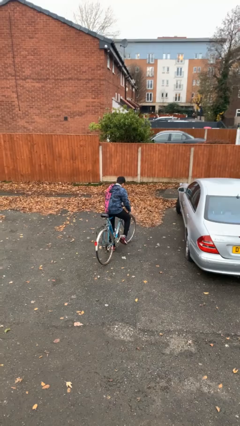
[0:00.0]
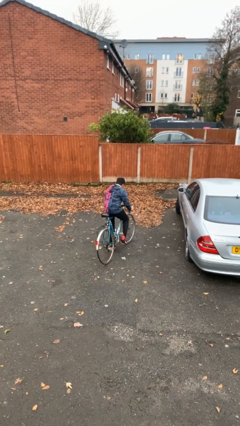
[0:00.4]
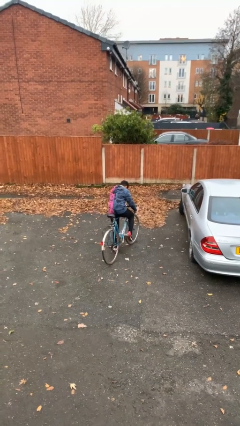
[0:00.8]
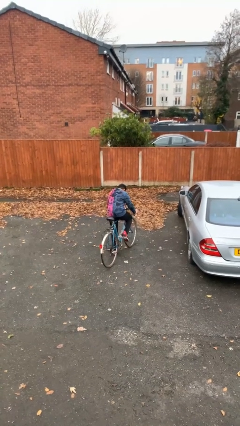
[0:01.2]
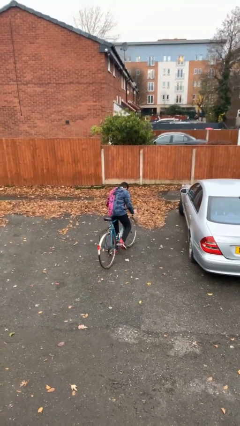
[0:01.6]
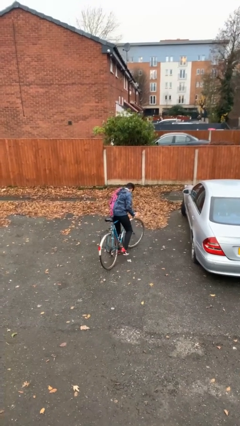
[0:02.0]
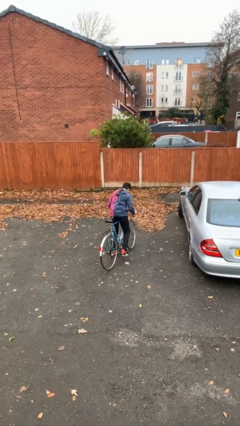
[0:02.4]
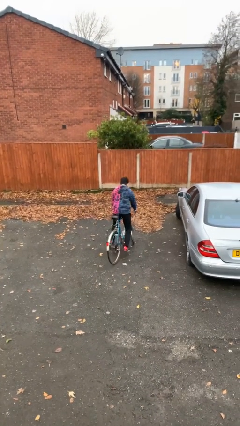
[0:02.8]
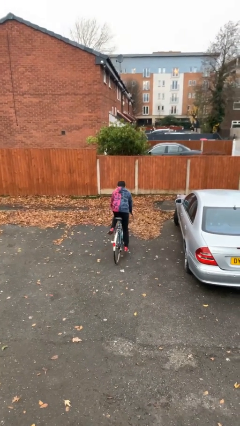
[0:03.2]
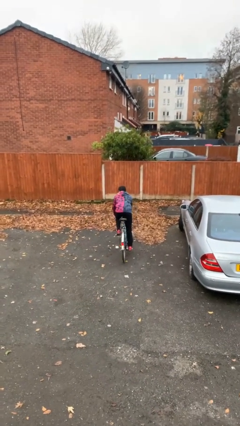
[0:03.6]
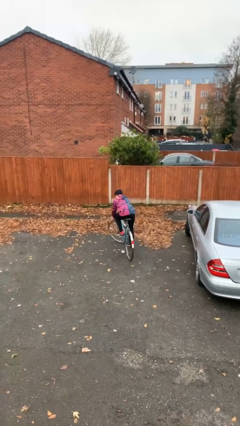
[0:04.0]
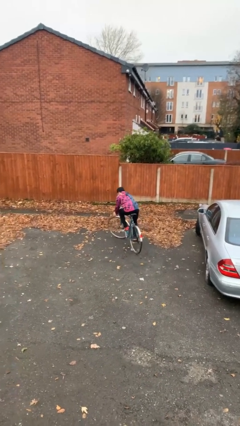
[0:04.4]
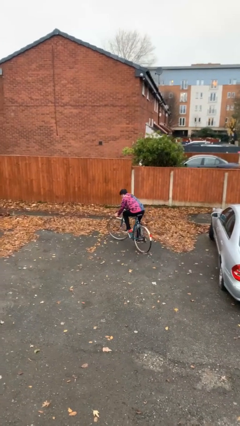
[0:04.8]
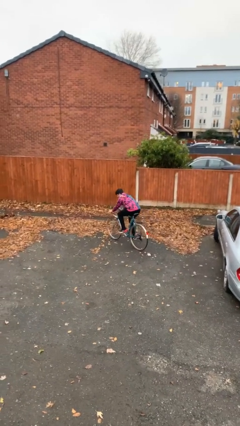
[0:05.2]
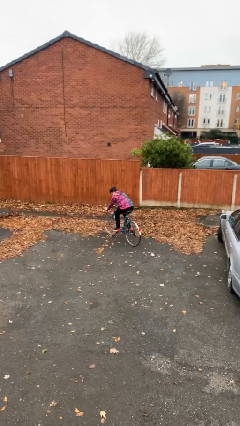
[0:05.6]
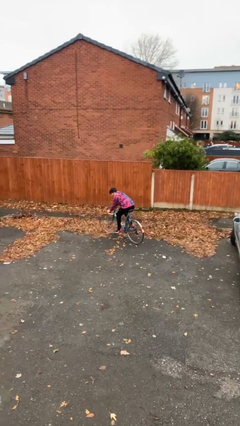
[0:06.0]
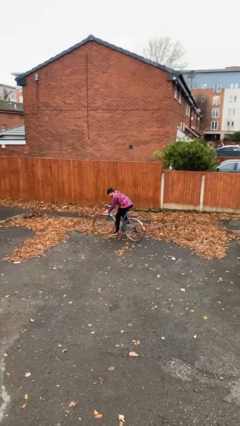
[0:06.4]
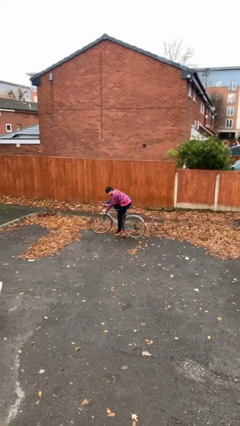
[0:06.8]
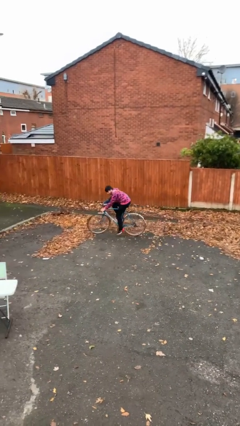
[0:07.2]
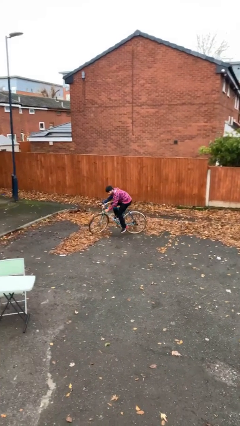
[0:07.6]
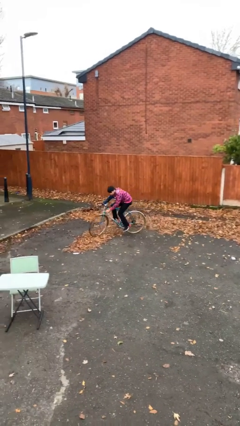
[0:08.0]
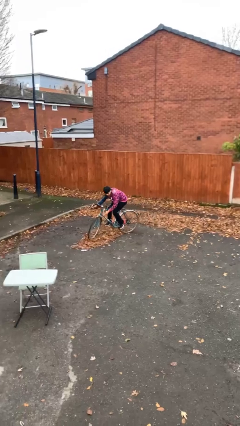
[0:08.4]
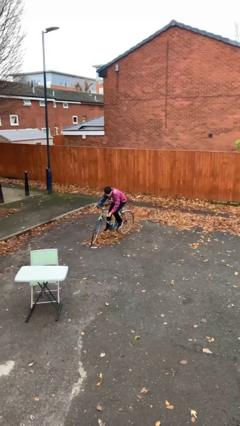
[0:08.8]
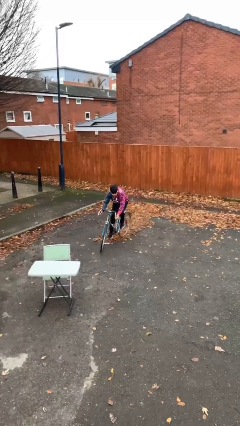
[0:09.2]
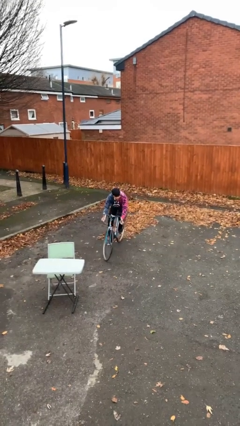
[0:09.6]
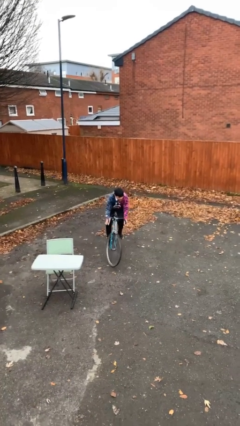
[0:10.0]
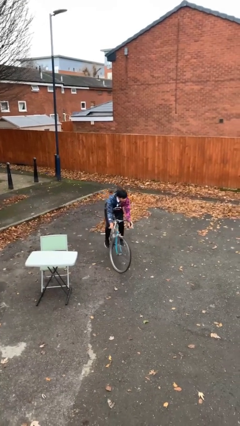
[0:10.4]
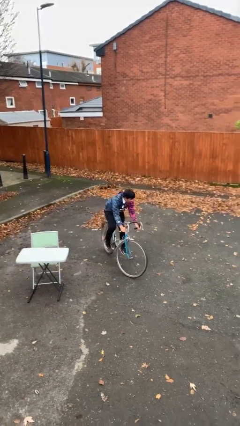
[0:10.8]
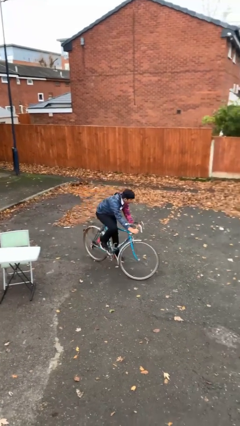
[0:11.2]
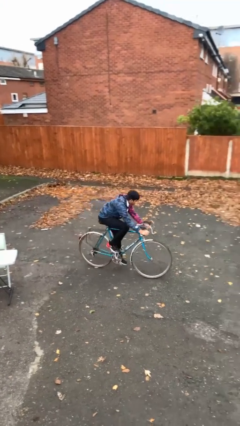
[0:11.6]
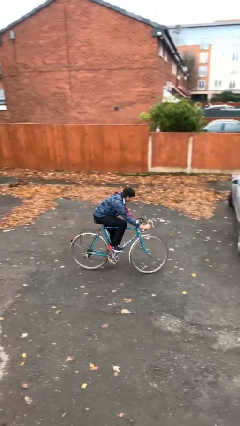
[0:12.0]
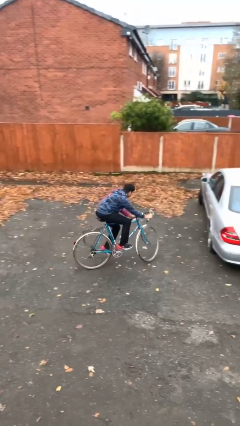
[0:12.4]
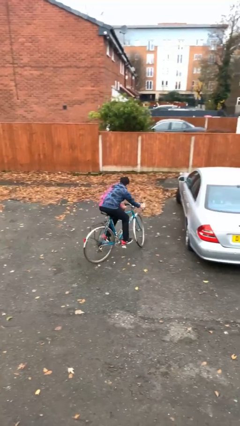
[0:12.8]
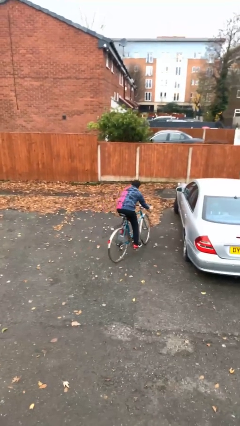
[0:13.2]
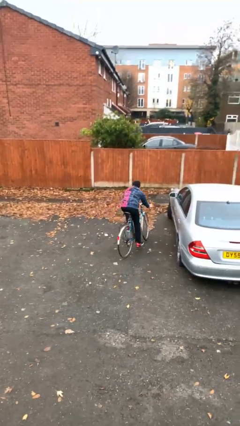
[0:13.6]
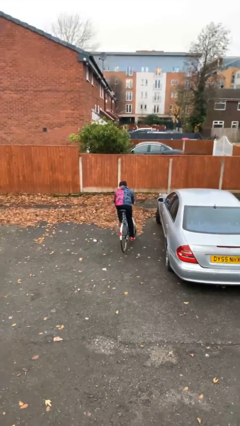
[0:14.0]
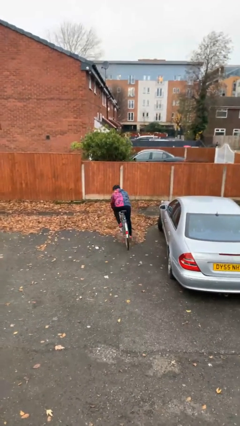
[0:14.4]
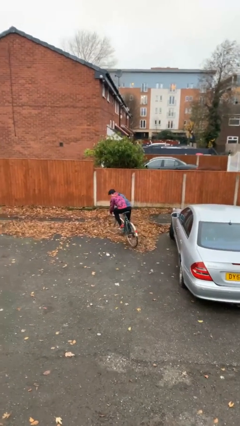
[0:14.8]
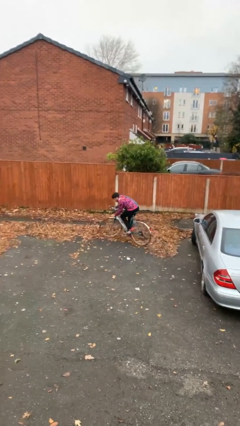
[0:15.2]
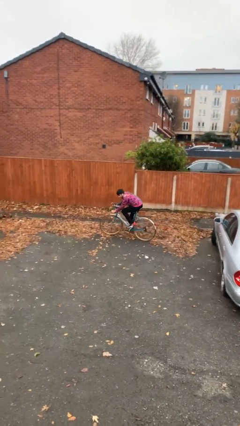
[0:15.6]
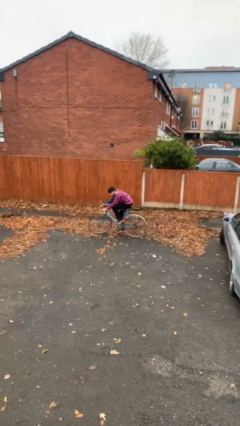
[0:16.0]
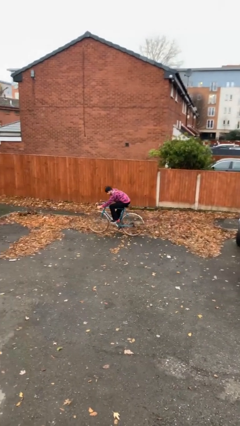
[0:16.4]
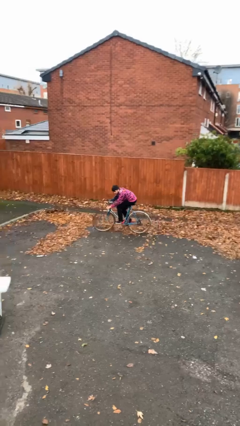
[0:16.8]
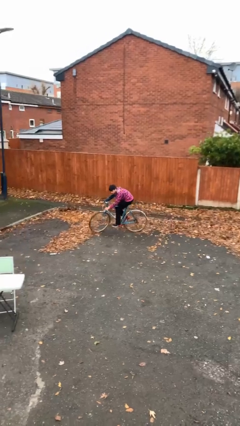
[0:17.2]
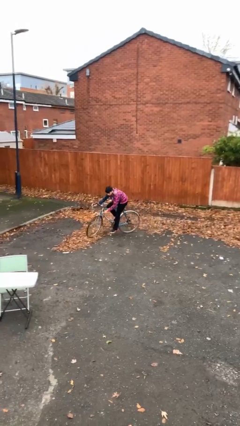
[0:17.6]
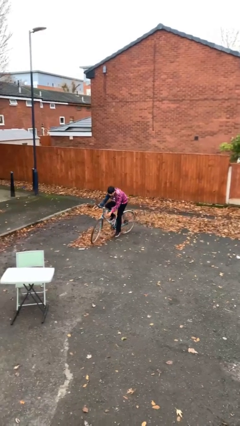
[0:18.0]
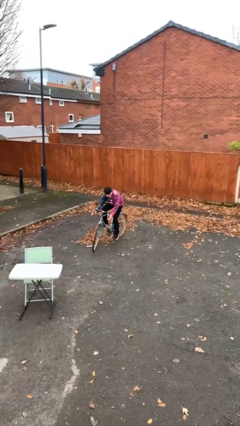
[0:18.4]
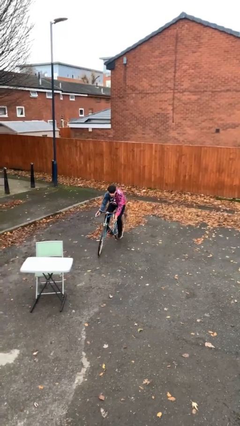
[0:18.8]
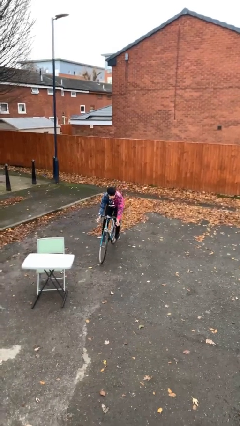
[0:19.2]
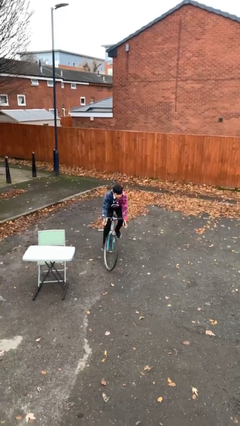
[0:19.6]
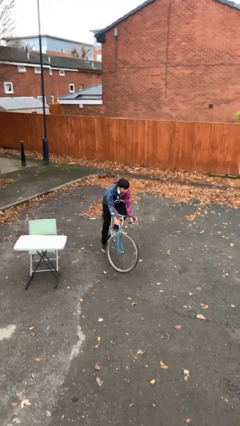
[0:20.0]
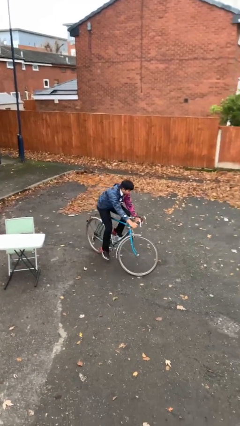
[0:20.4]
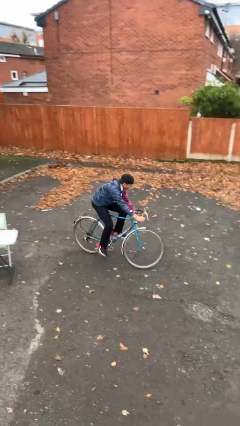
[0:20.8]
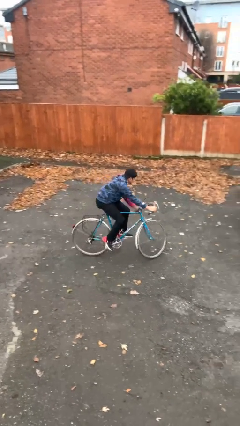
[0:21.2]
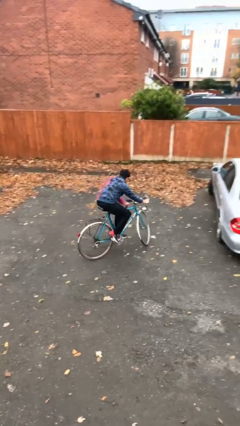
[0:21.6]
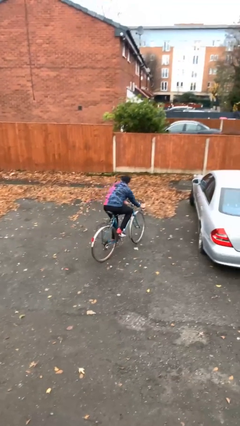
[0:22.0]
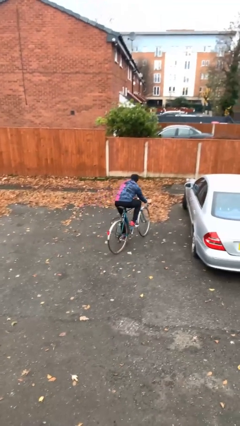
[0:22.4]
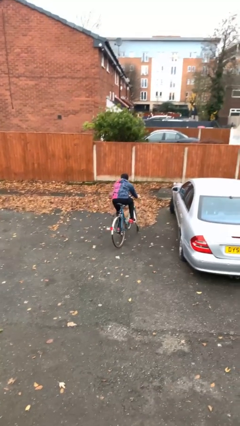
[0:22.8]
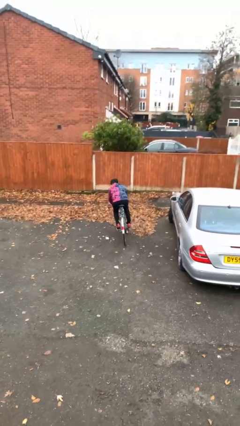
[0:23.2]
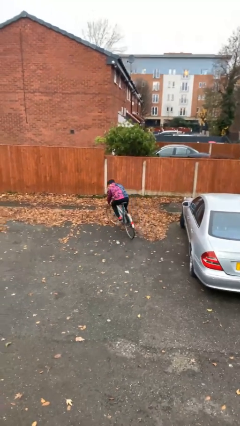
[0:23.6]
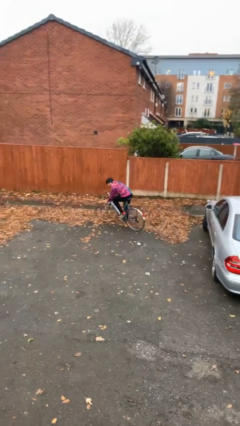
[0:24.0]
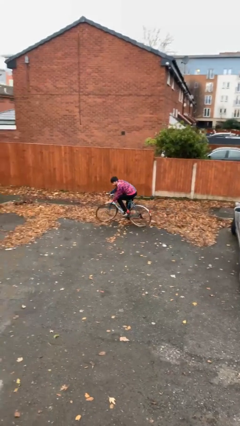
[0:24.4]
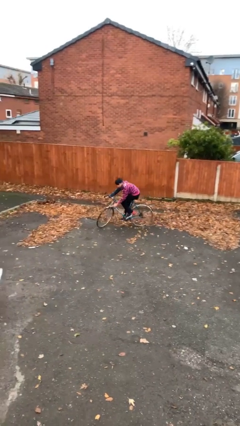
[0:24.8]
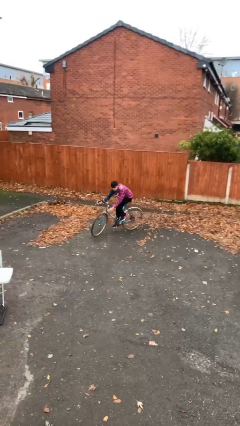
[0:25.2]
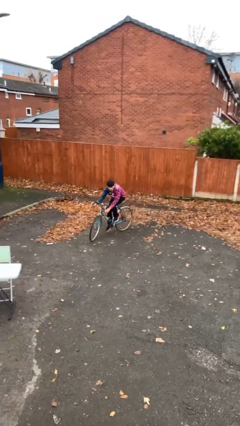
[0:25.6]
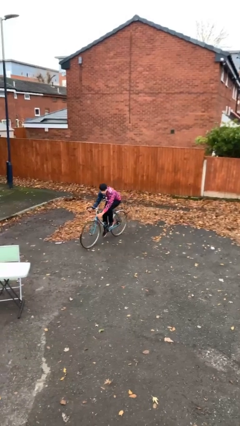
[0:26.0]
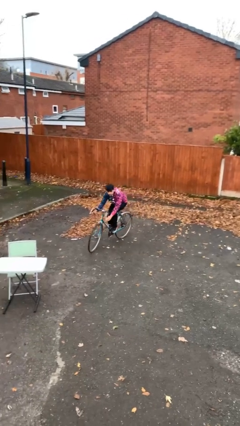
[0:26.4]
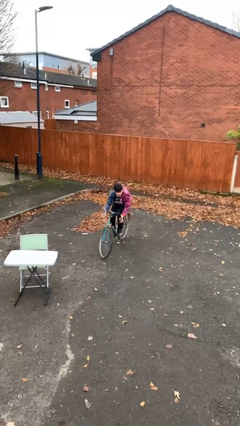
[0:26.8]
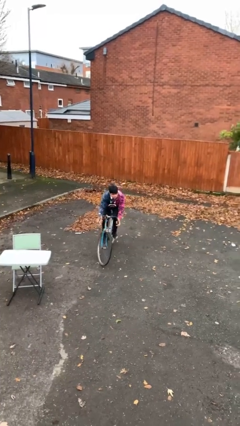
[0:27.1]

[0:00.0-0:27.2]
person rides bicycle

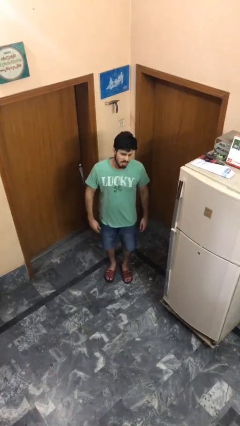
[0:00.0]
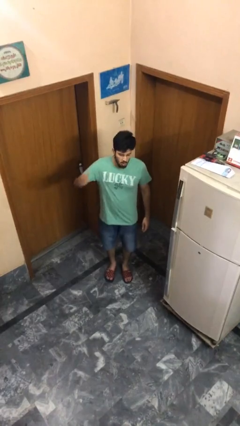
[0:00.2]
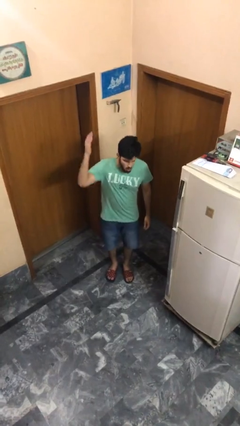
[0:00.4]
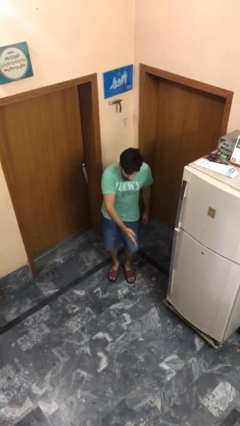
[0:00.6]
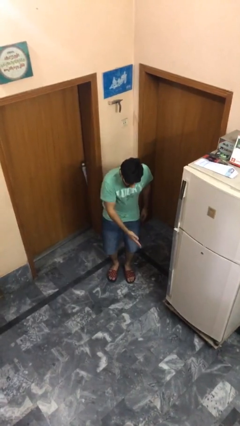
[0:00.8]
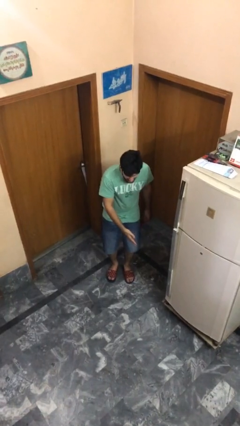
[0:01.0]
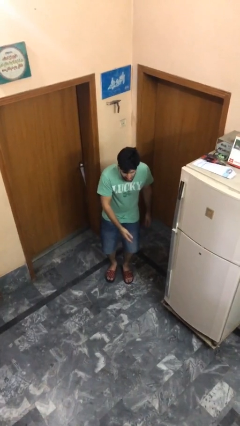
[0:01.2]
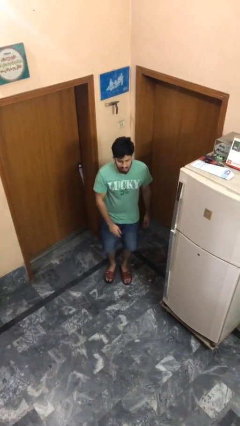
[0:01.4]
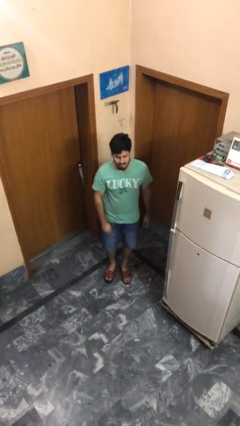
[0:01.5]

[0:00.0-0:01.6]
person karate chop

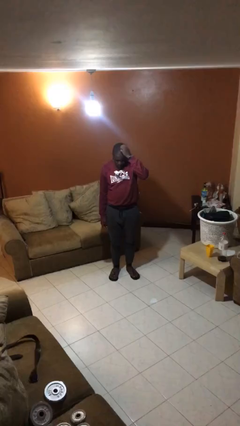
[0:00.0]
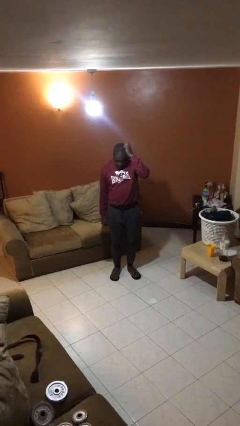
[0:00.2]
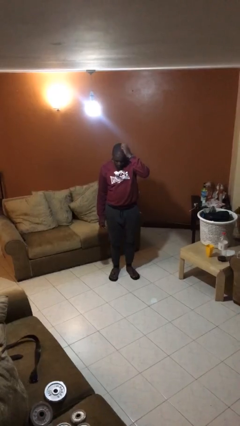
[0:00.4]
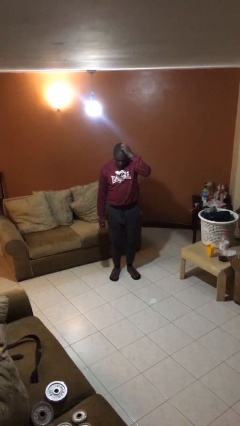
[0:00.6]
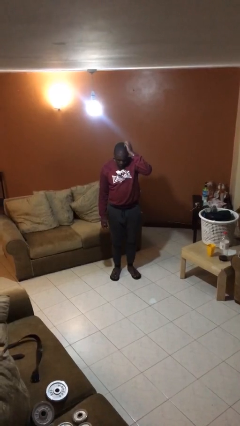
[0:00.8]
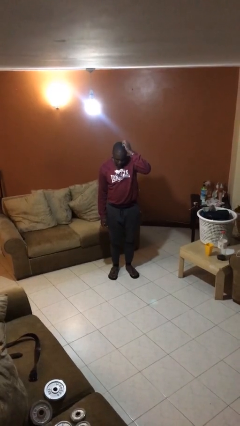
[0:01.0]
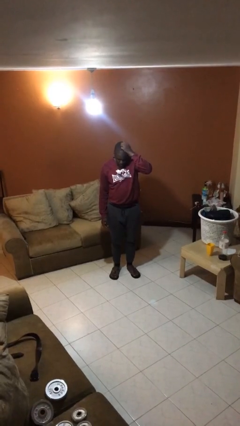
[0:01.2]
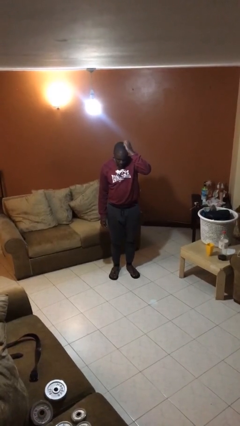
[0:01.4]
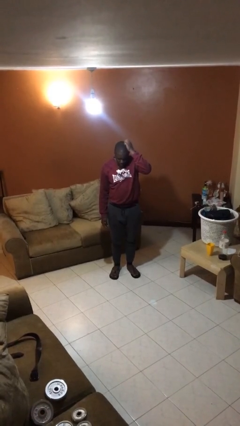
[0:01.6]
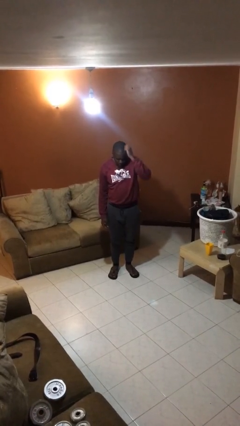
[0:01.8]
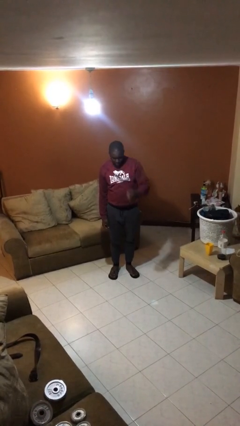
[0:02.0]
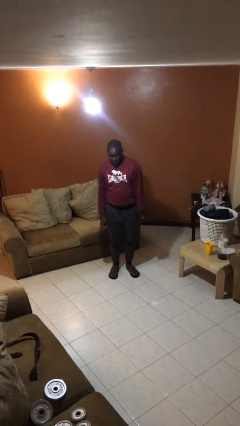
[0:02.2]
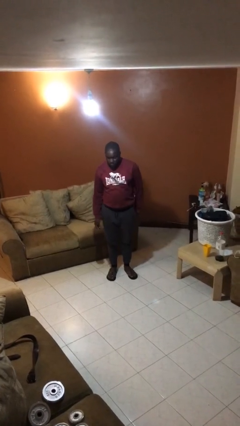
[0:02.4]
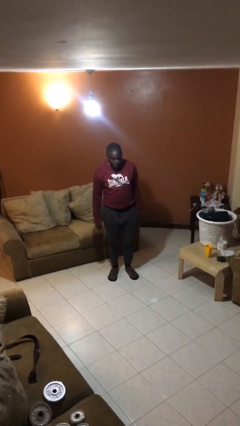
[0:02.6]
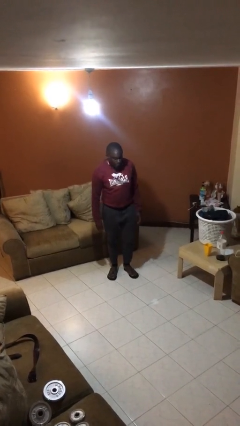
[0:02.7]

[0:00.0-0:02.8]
person scratches face

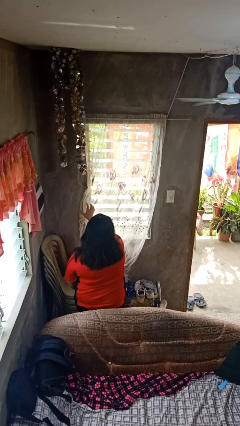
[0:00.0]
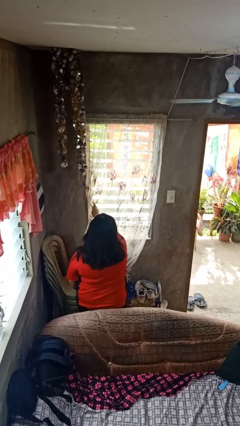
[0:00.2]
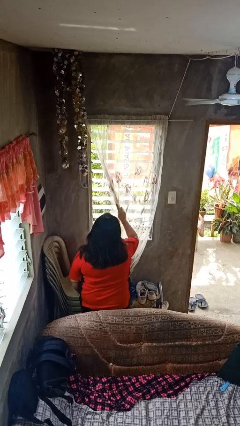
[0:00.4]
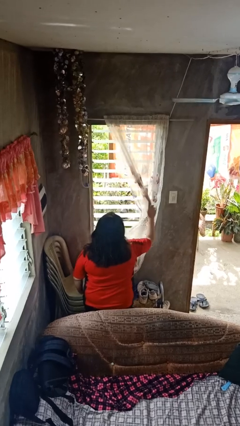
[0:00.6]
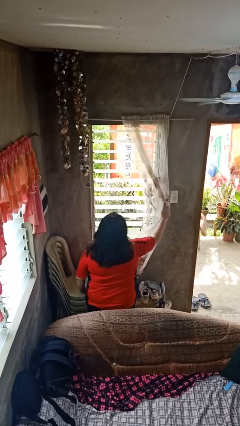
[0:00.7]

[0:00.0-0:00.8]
person opens curtains
